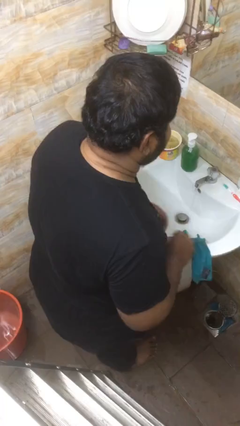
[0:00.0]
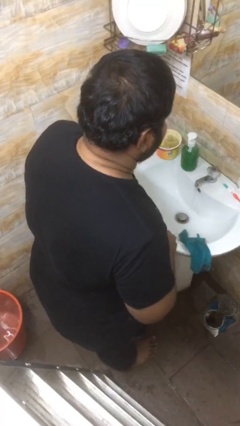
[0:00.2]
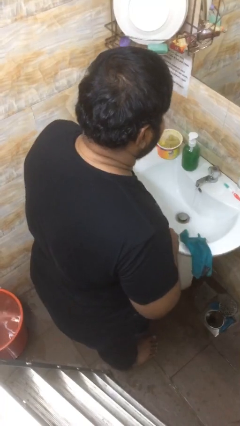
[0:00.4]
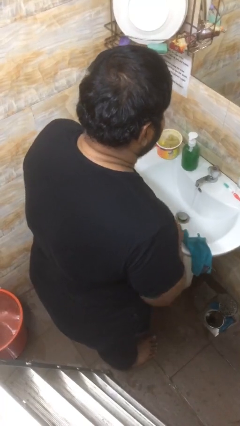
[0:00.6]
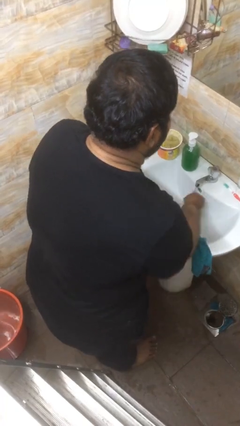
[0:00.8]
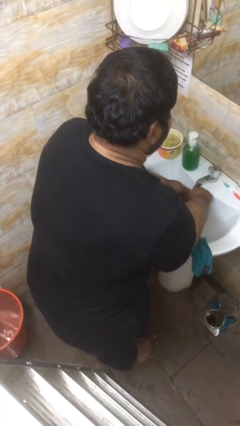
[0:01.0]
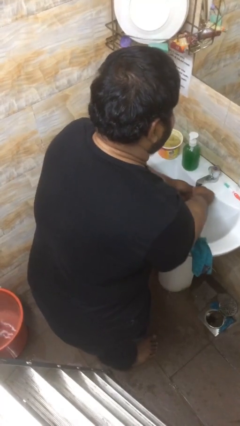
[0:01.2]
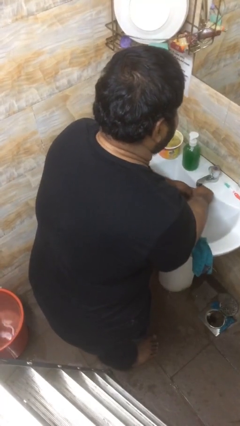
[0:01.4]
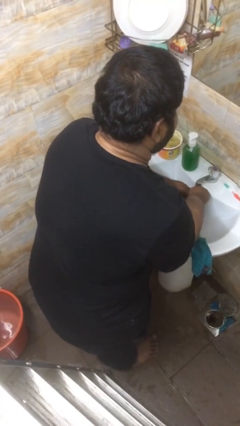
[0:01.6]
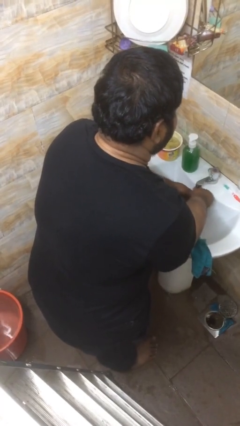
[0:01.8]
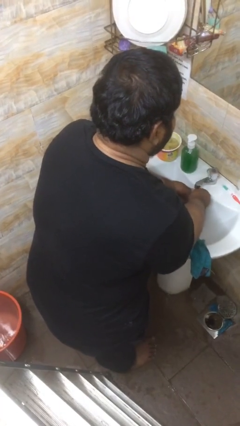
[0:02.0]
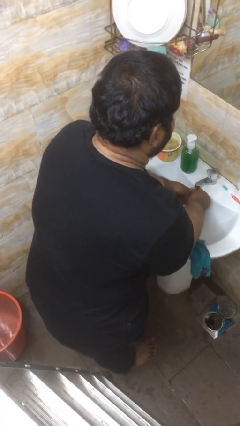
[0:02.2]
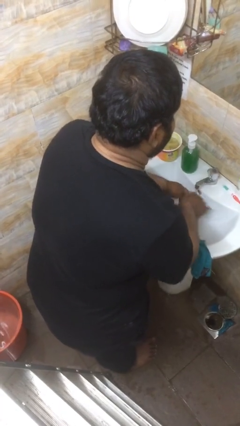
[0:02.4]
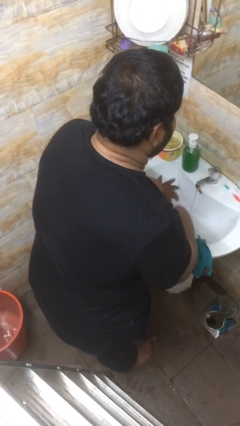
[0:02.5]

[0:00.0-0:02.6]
person washes hands

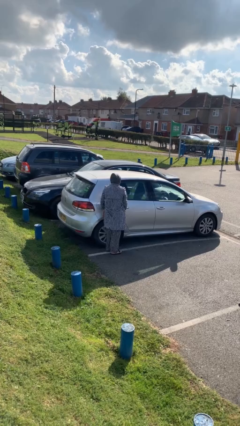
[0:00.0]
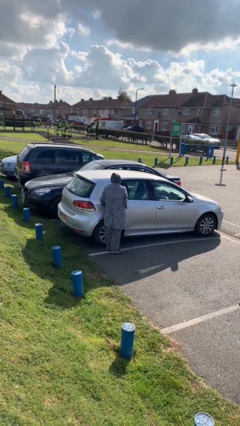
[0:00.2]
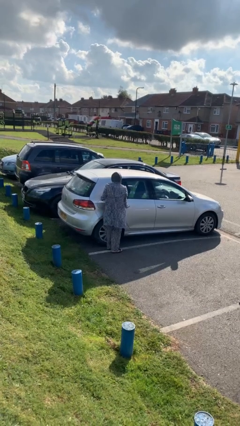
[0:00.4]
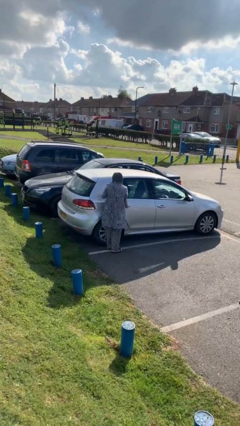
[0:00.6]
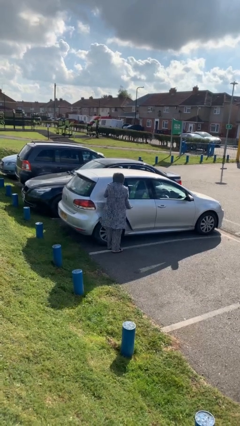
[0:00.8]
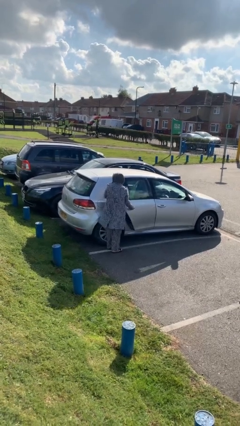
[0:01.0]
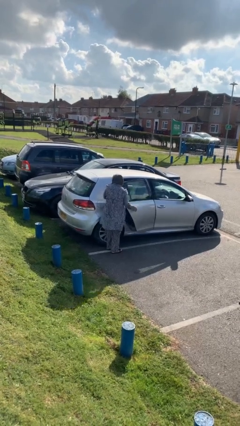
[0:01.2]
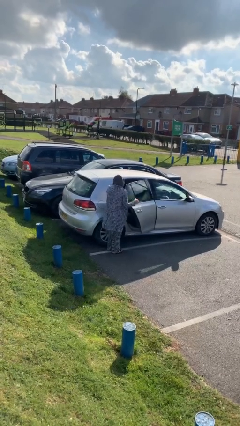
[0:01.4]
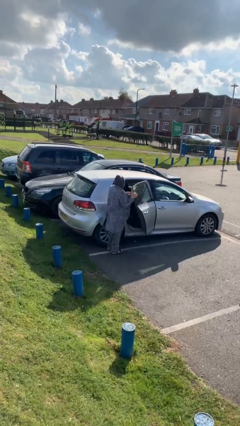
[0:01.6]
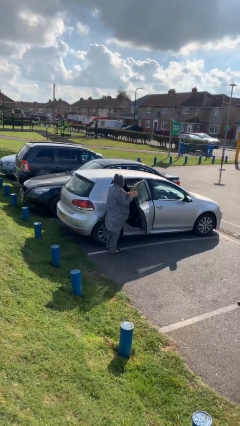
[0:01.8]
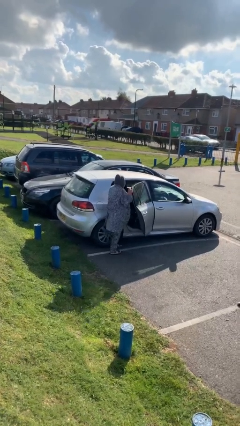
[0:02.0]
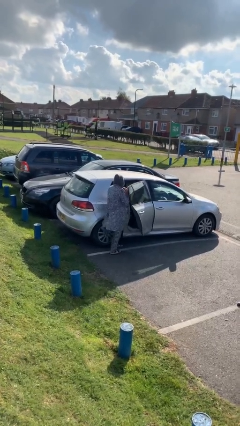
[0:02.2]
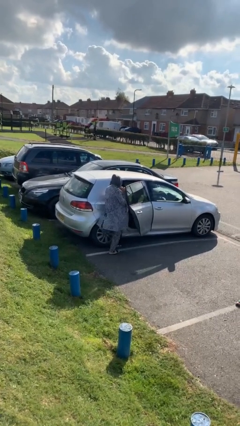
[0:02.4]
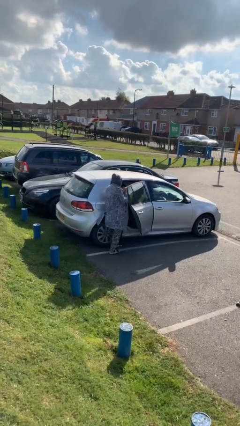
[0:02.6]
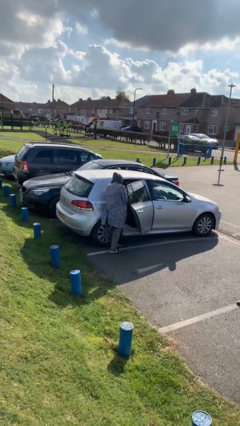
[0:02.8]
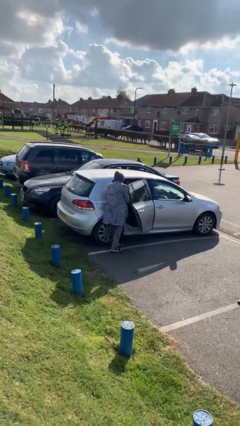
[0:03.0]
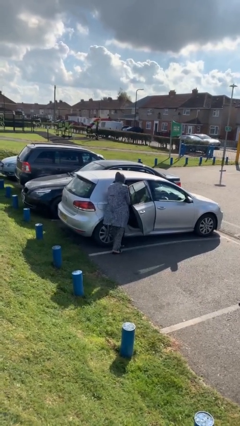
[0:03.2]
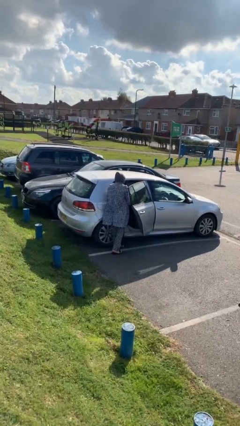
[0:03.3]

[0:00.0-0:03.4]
person opens car door

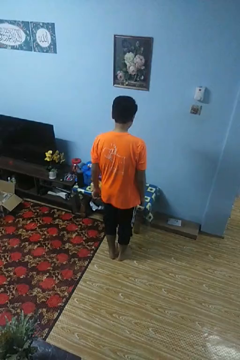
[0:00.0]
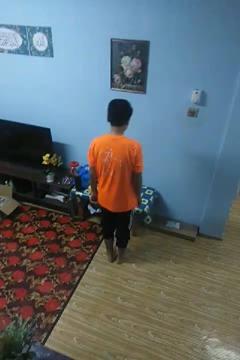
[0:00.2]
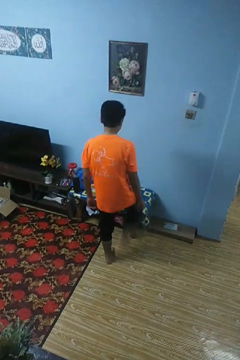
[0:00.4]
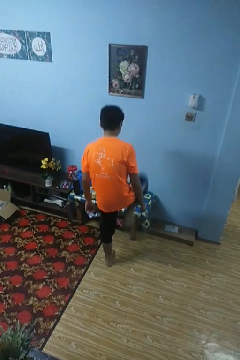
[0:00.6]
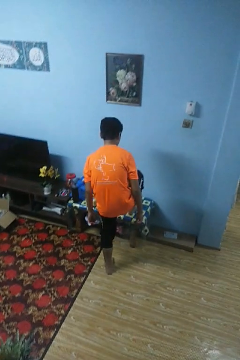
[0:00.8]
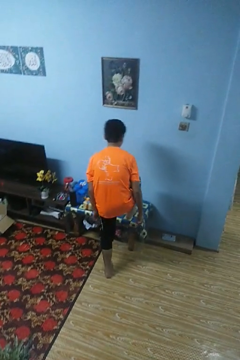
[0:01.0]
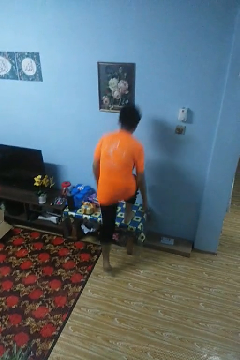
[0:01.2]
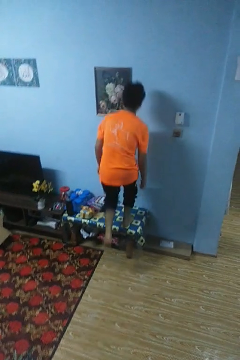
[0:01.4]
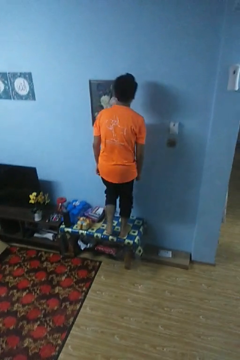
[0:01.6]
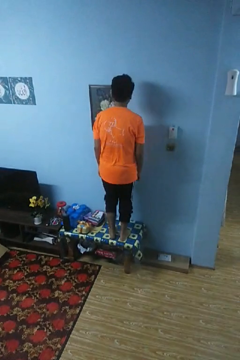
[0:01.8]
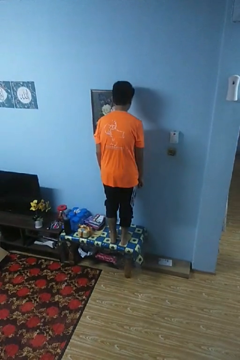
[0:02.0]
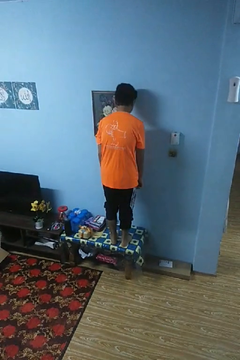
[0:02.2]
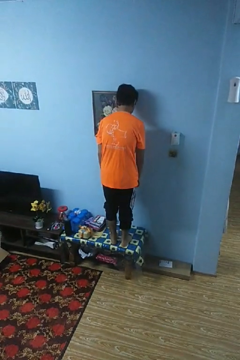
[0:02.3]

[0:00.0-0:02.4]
person climbs on table

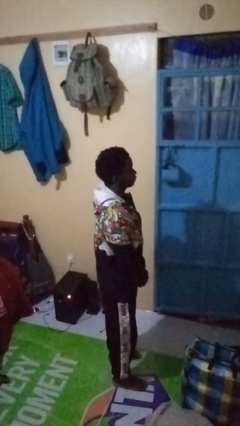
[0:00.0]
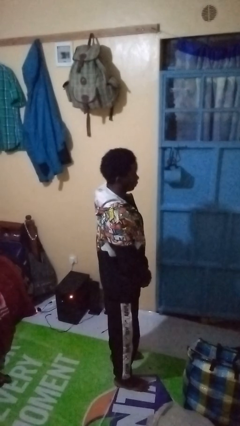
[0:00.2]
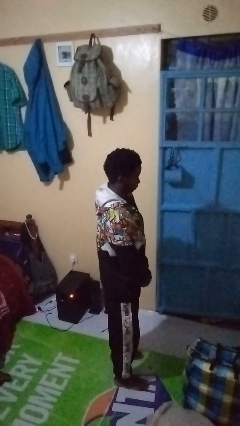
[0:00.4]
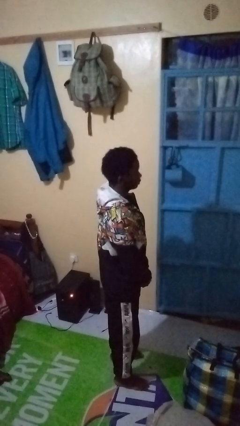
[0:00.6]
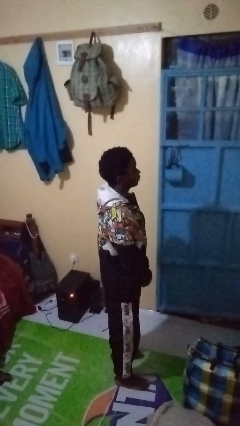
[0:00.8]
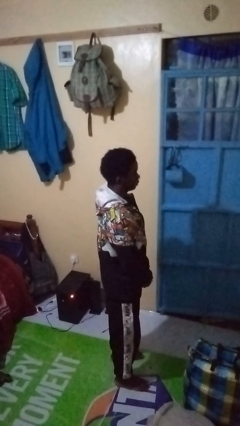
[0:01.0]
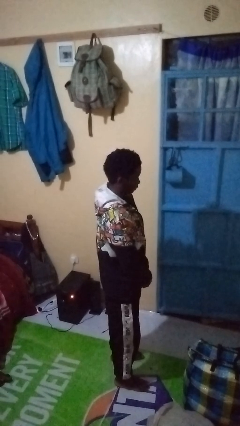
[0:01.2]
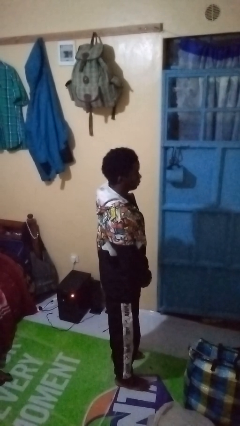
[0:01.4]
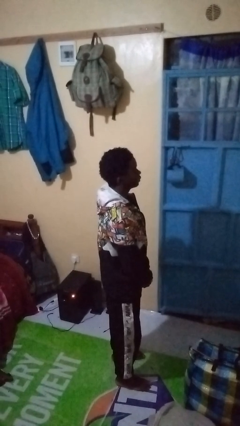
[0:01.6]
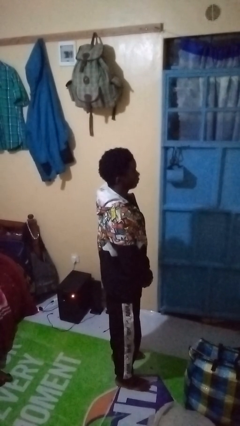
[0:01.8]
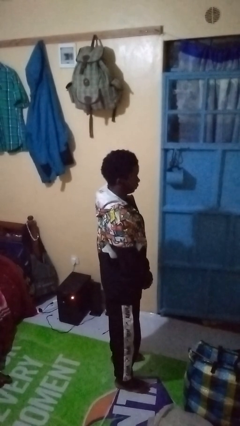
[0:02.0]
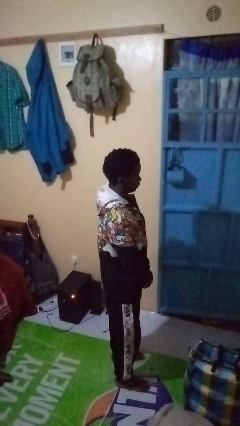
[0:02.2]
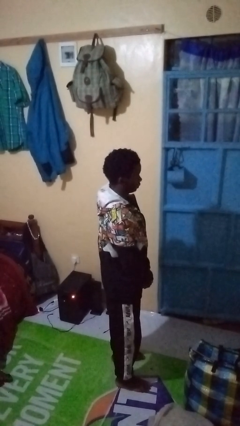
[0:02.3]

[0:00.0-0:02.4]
person nods head

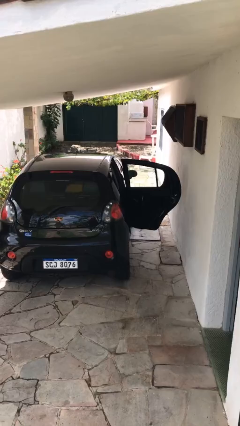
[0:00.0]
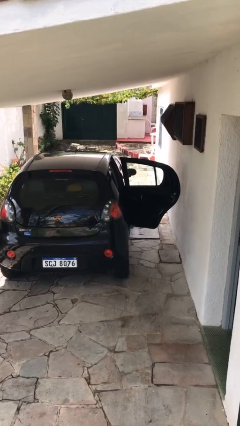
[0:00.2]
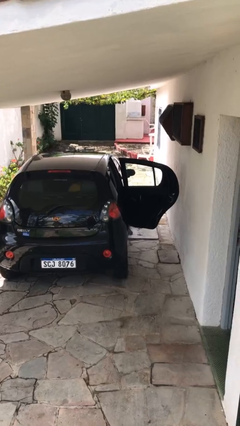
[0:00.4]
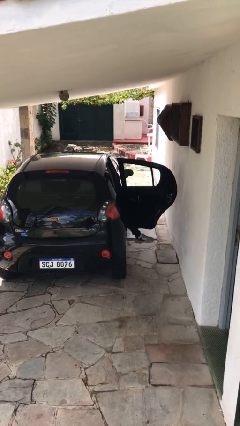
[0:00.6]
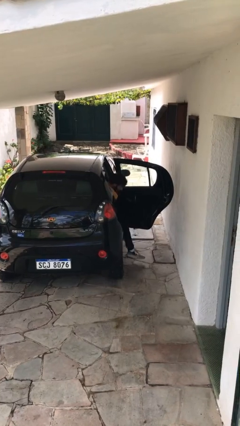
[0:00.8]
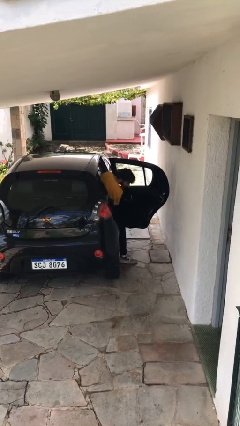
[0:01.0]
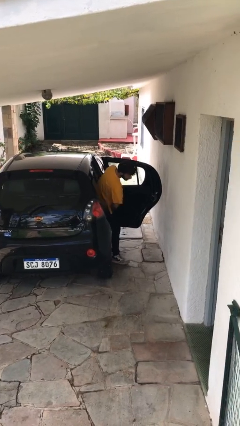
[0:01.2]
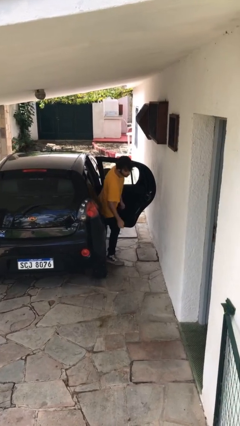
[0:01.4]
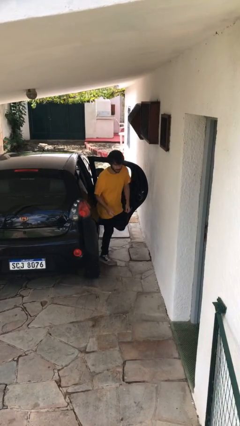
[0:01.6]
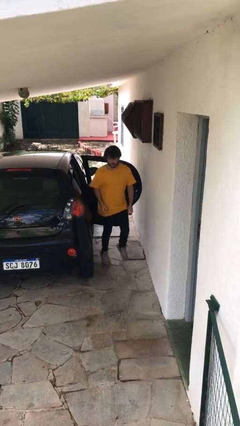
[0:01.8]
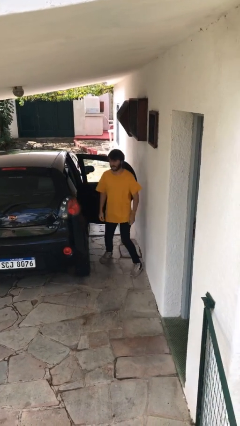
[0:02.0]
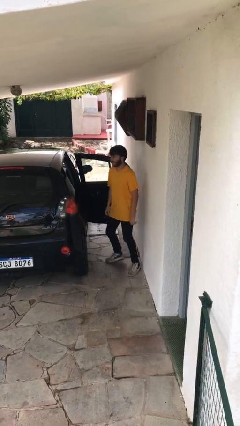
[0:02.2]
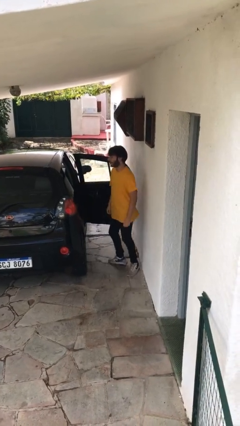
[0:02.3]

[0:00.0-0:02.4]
person exits car

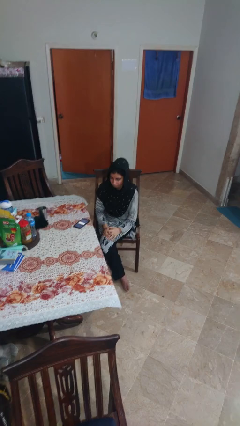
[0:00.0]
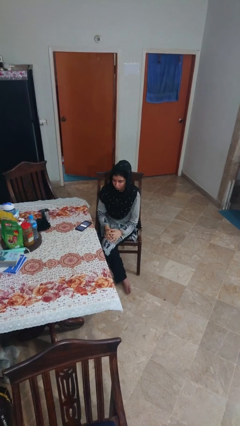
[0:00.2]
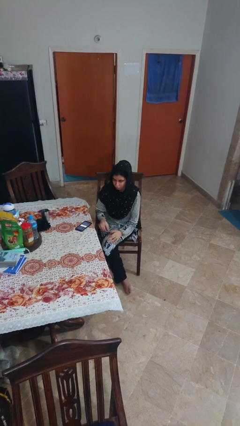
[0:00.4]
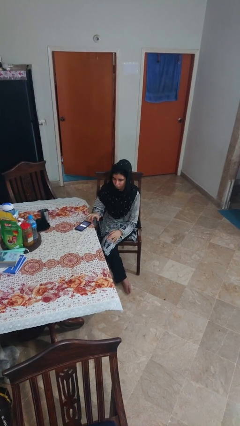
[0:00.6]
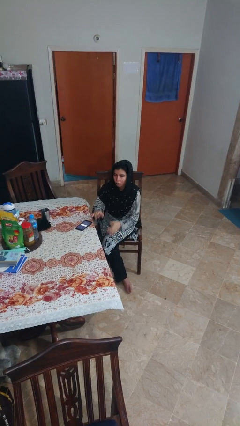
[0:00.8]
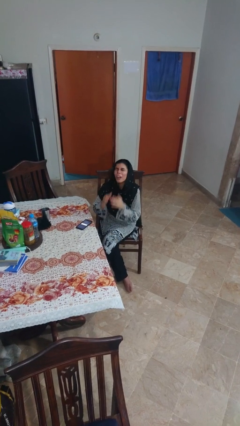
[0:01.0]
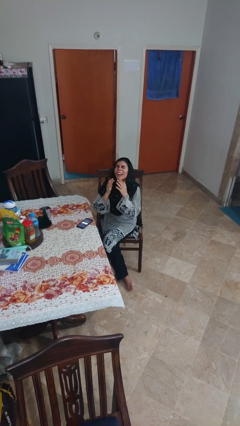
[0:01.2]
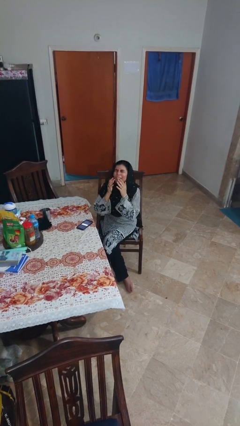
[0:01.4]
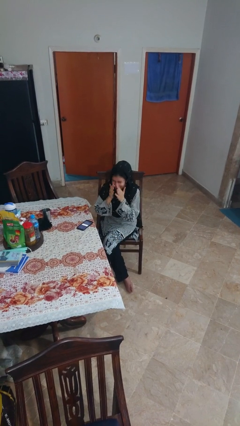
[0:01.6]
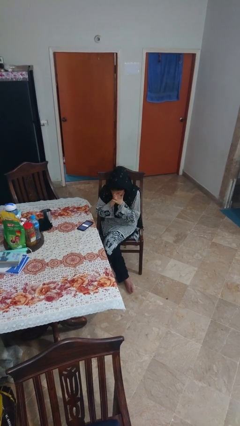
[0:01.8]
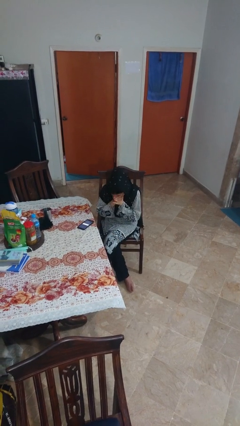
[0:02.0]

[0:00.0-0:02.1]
person sneezes into hand

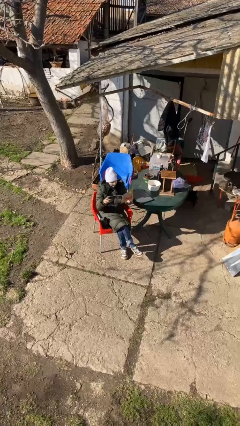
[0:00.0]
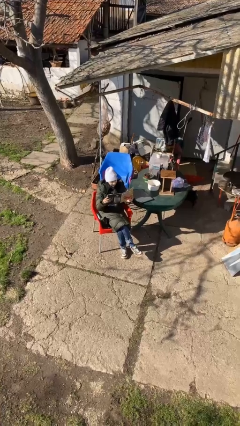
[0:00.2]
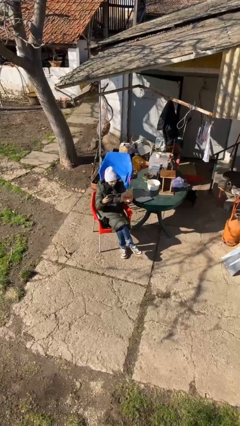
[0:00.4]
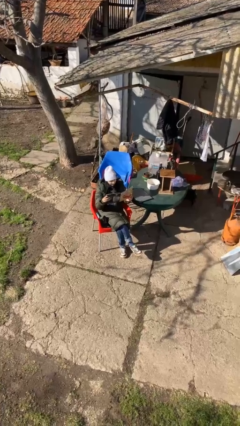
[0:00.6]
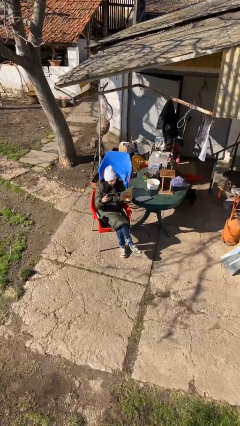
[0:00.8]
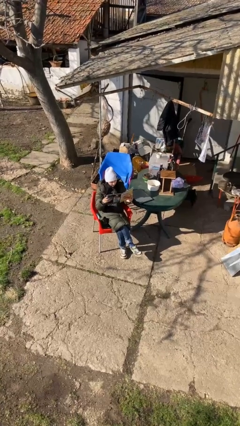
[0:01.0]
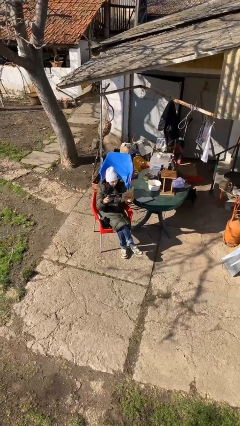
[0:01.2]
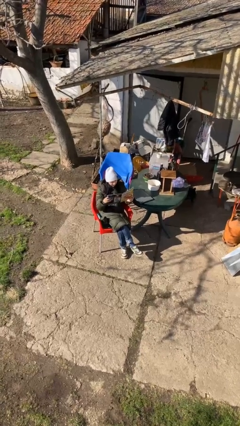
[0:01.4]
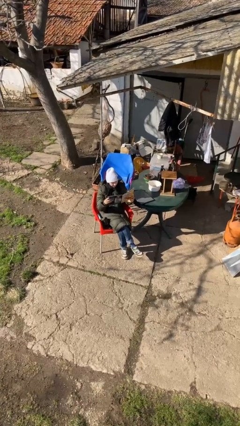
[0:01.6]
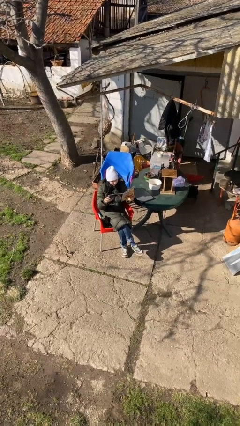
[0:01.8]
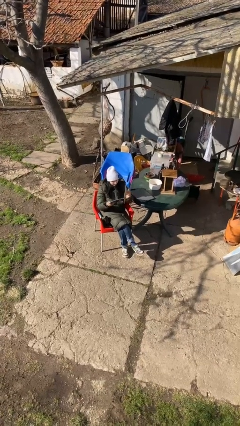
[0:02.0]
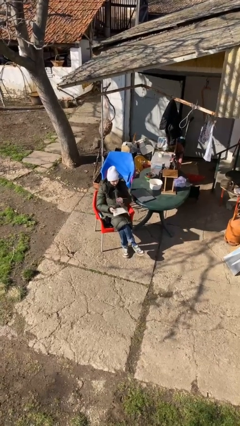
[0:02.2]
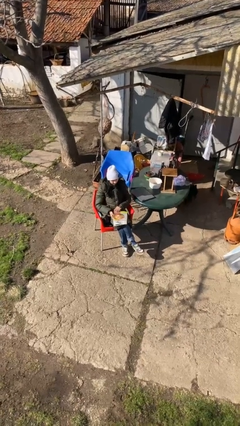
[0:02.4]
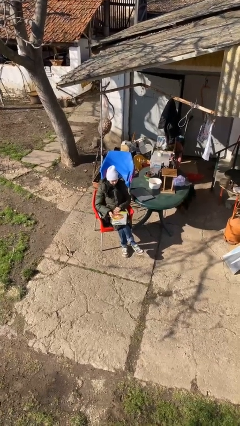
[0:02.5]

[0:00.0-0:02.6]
person reads document
